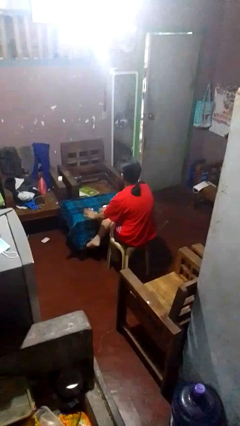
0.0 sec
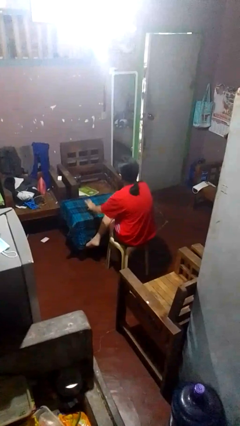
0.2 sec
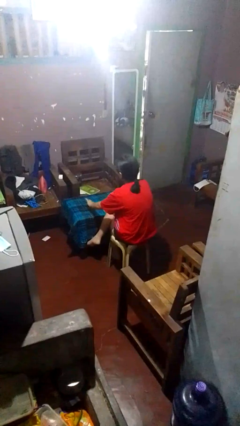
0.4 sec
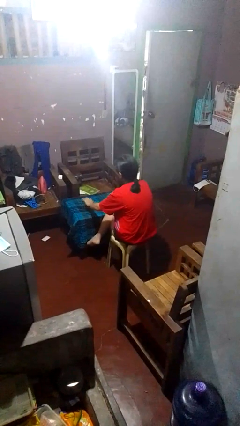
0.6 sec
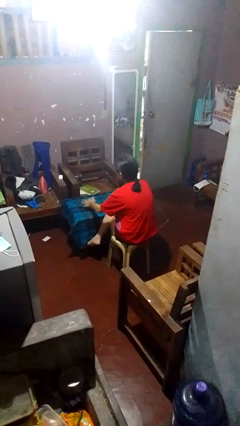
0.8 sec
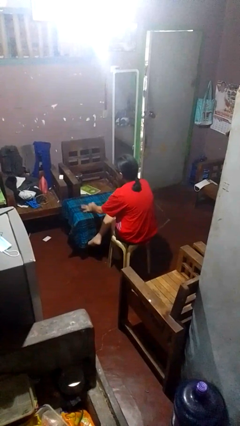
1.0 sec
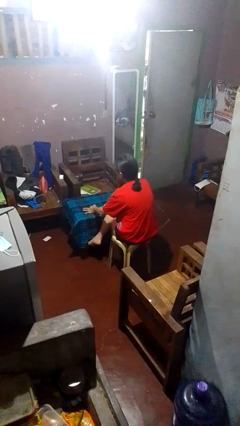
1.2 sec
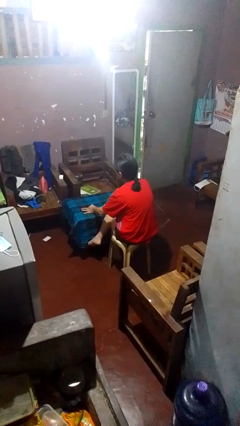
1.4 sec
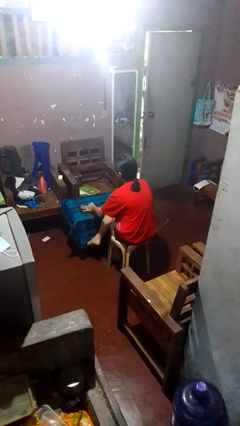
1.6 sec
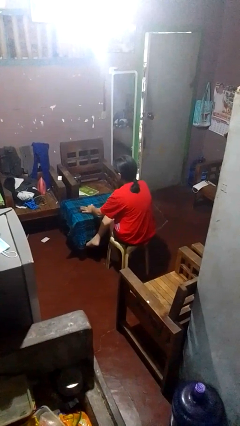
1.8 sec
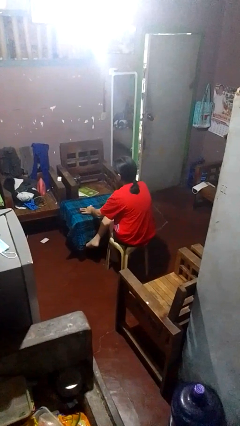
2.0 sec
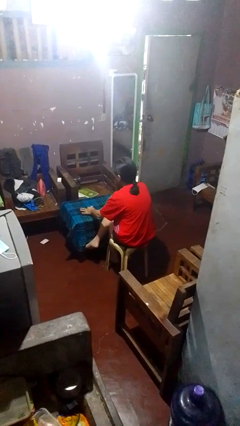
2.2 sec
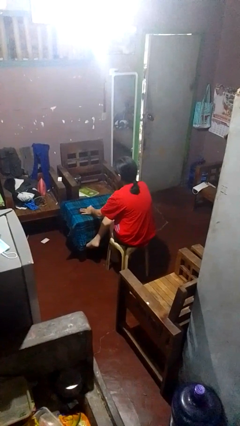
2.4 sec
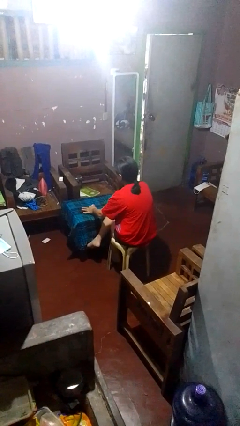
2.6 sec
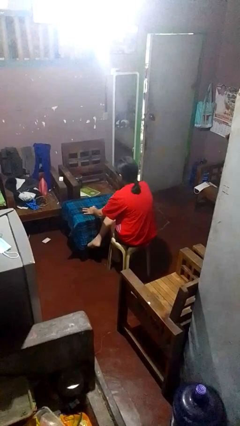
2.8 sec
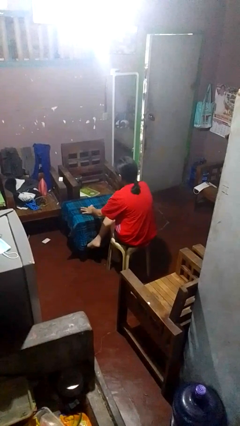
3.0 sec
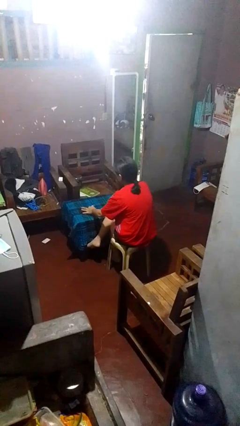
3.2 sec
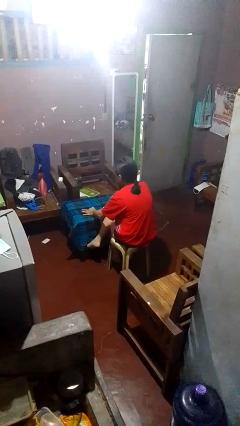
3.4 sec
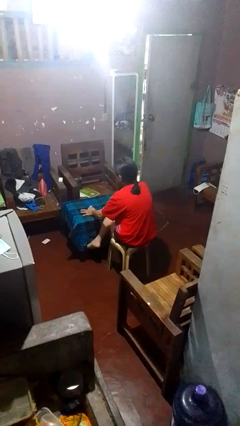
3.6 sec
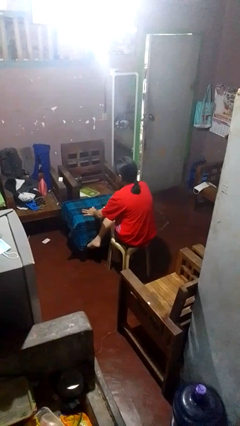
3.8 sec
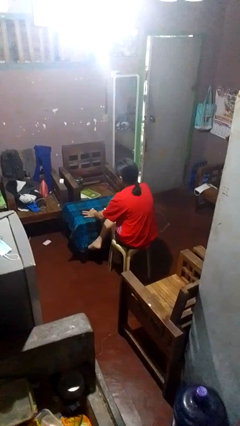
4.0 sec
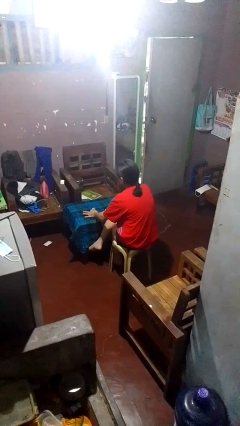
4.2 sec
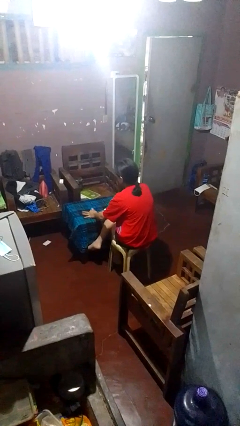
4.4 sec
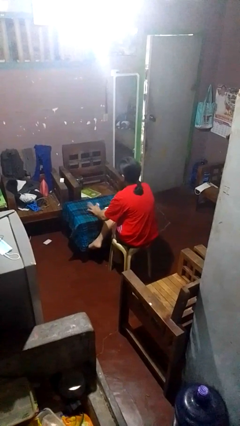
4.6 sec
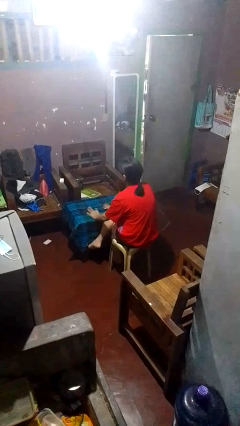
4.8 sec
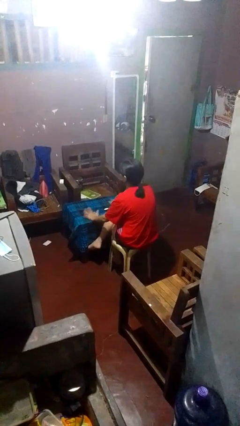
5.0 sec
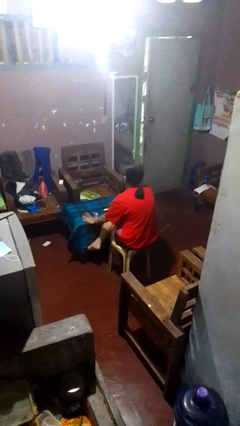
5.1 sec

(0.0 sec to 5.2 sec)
person paints fingernails

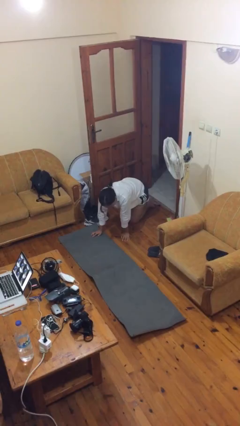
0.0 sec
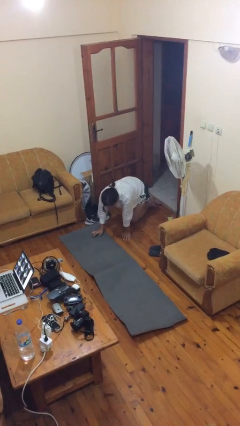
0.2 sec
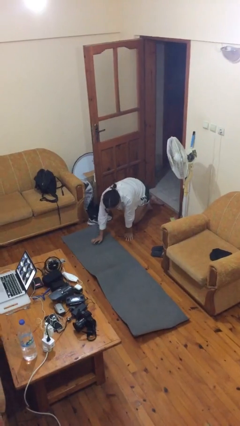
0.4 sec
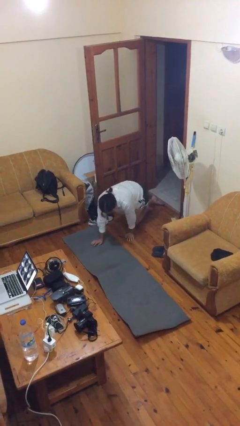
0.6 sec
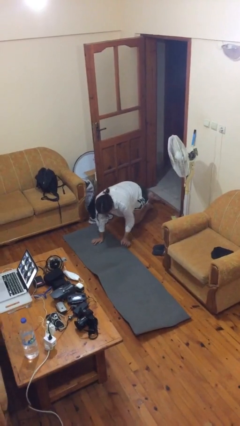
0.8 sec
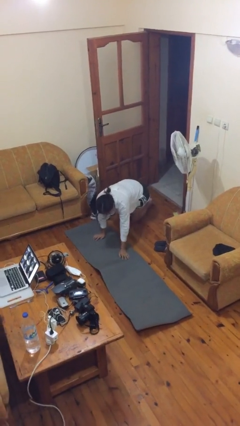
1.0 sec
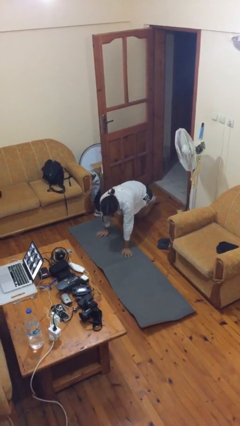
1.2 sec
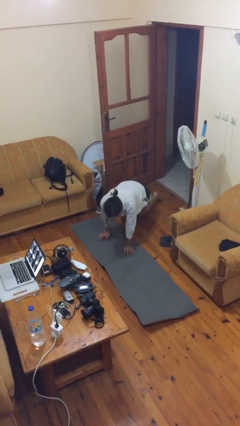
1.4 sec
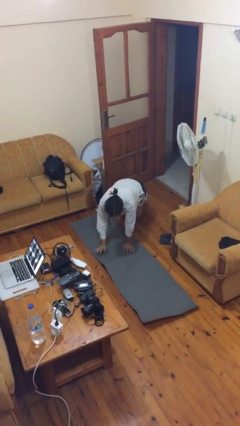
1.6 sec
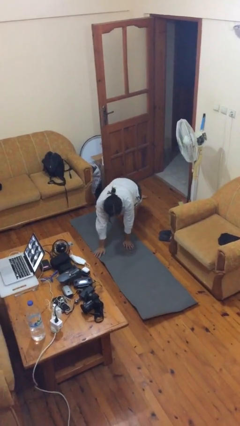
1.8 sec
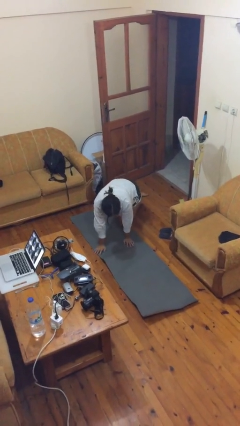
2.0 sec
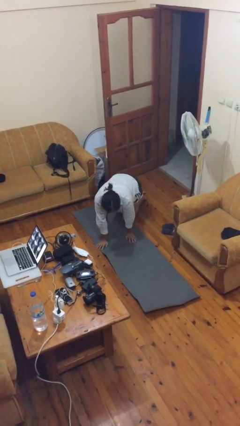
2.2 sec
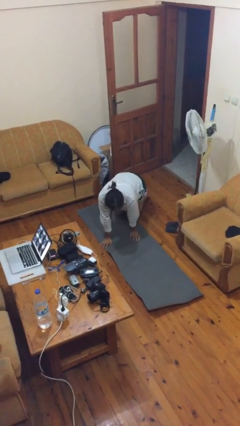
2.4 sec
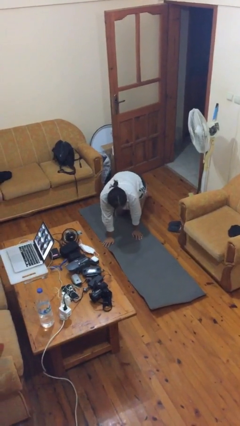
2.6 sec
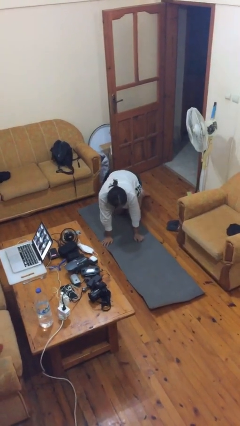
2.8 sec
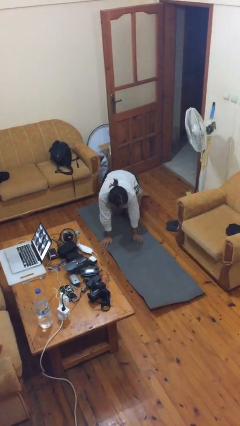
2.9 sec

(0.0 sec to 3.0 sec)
person crawls

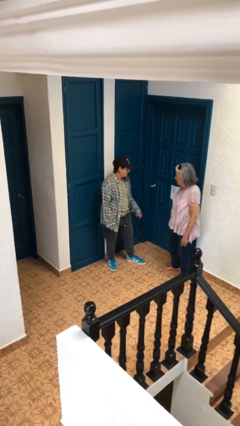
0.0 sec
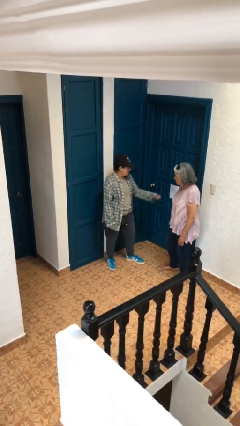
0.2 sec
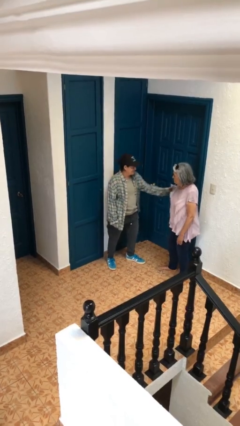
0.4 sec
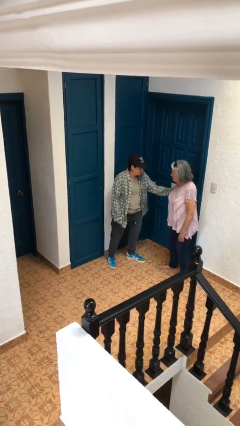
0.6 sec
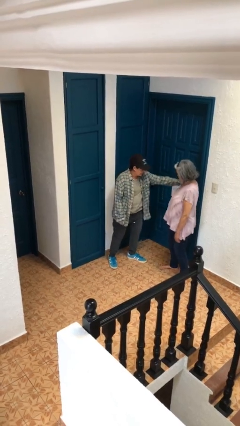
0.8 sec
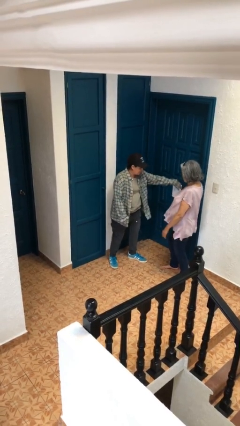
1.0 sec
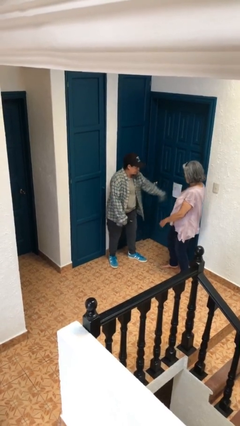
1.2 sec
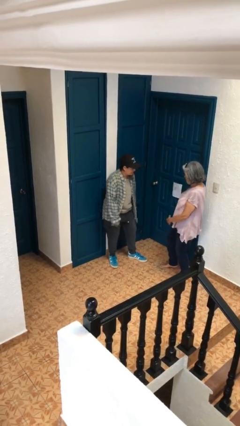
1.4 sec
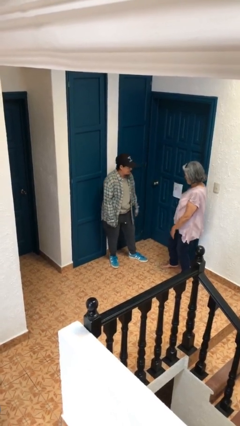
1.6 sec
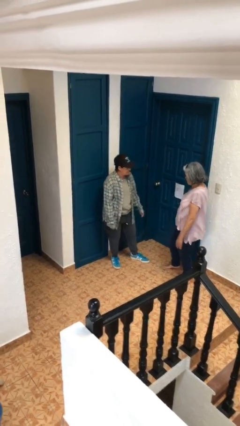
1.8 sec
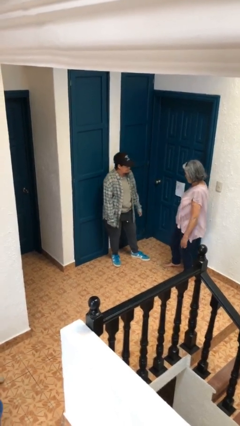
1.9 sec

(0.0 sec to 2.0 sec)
person shoves person

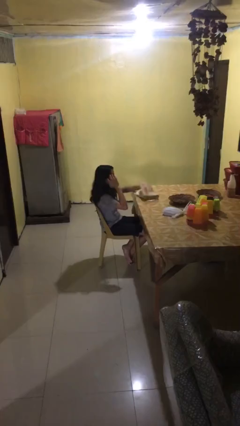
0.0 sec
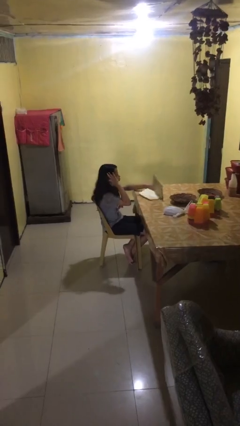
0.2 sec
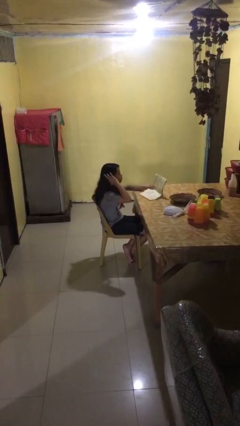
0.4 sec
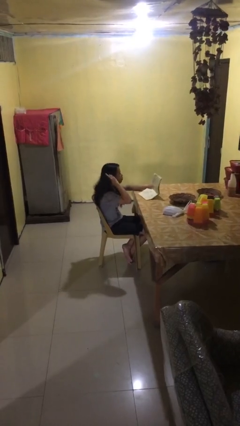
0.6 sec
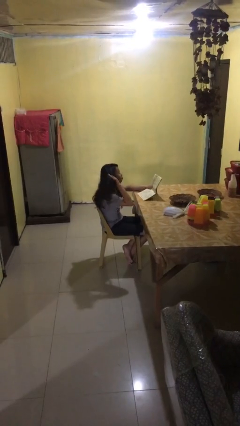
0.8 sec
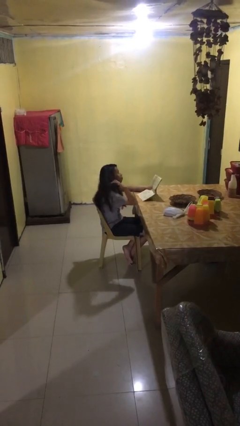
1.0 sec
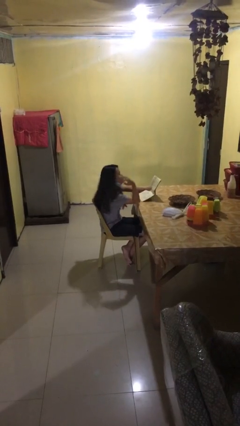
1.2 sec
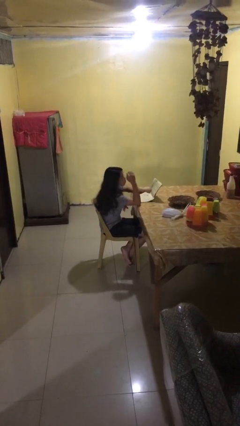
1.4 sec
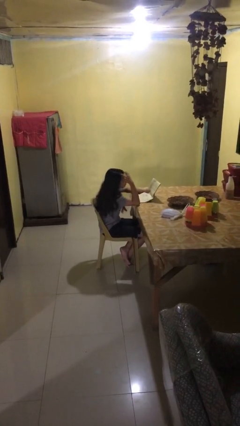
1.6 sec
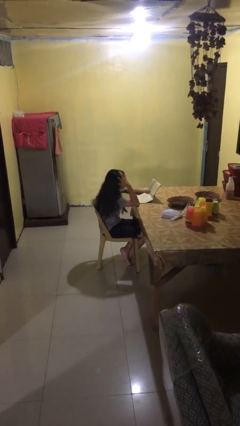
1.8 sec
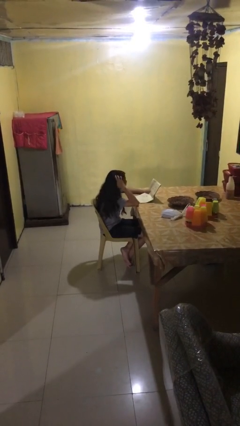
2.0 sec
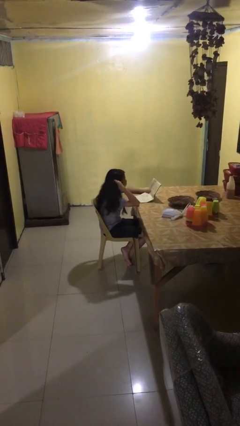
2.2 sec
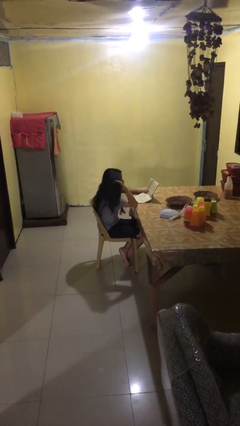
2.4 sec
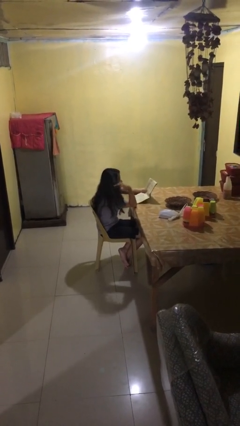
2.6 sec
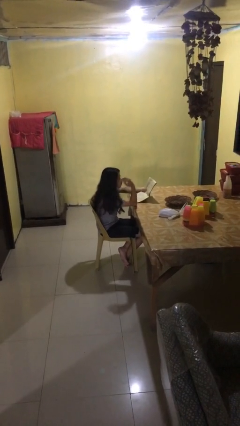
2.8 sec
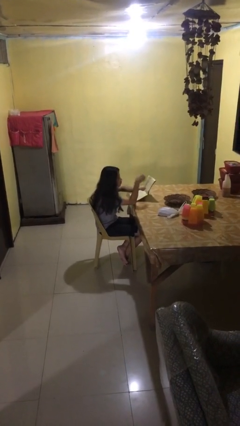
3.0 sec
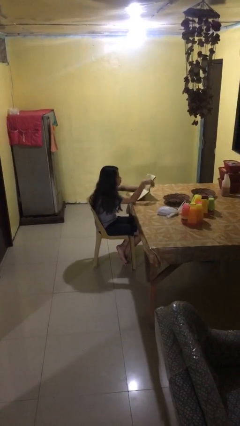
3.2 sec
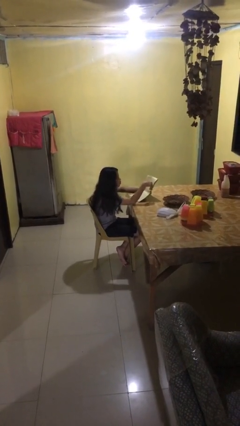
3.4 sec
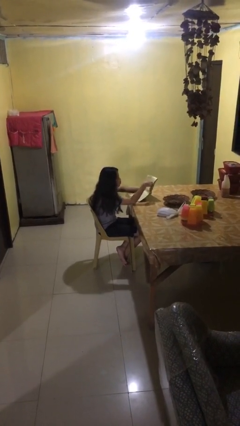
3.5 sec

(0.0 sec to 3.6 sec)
person reads document

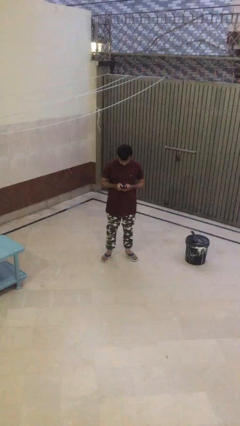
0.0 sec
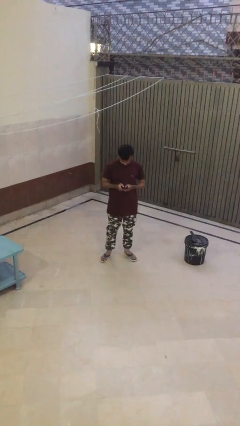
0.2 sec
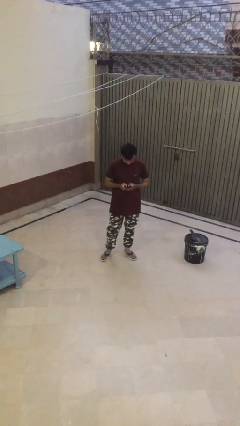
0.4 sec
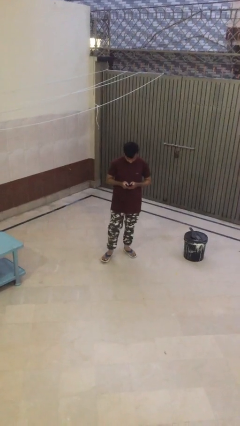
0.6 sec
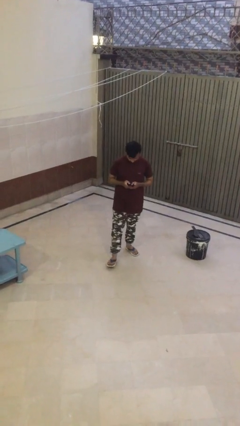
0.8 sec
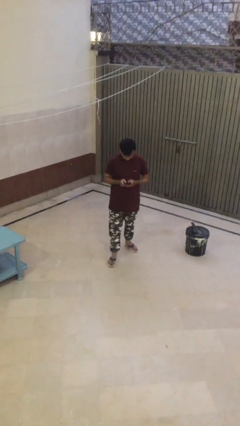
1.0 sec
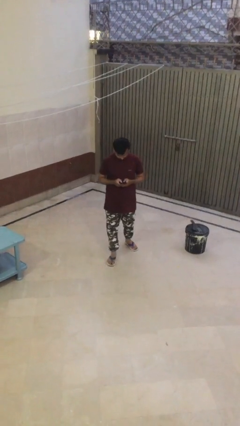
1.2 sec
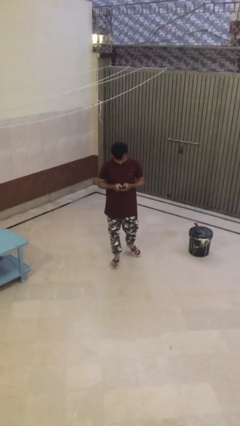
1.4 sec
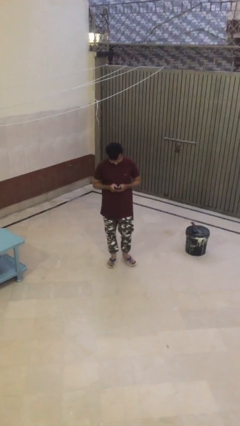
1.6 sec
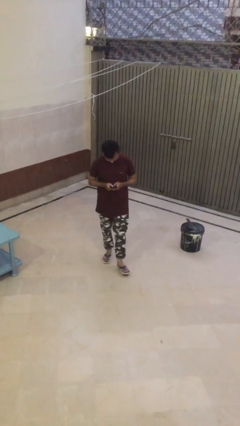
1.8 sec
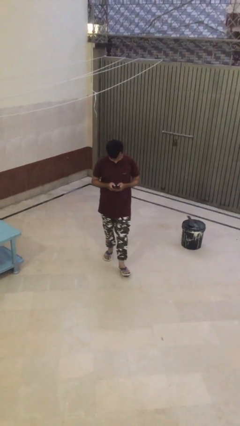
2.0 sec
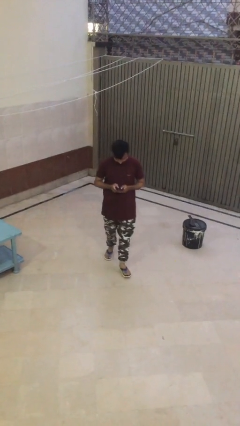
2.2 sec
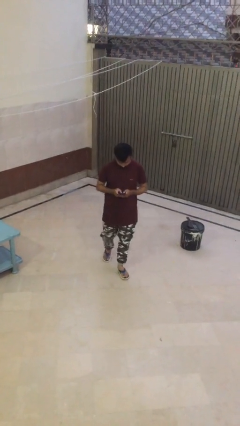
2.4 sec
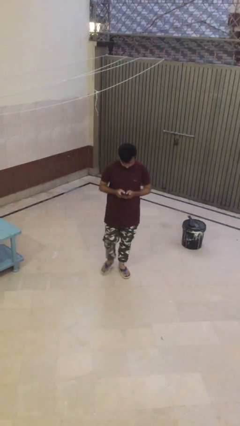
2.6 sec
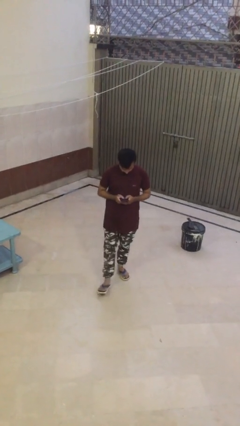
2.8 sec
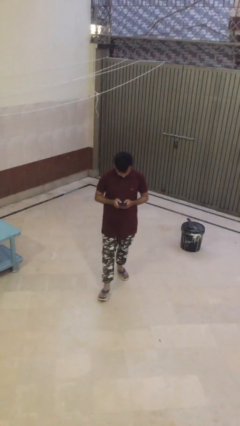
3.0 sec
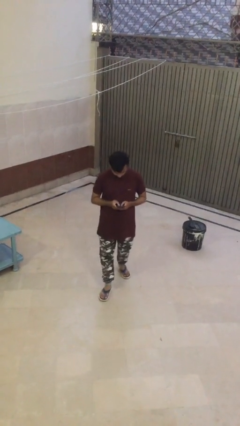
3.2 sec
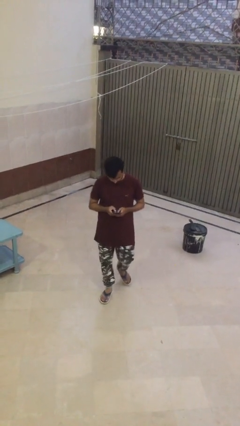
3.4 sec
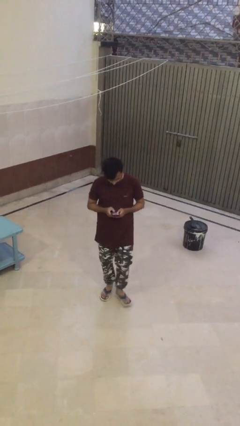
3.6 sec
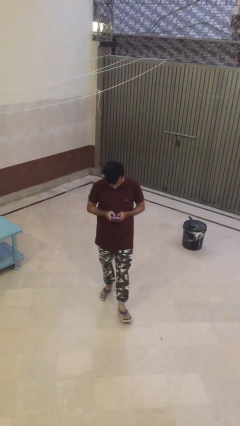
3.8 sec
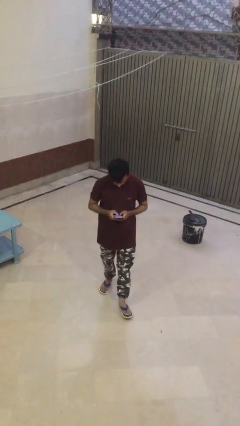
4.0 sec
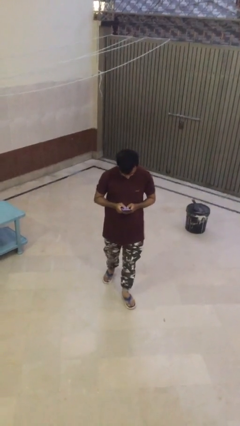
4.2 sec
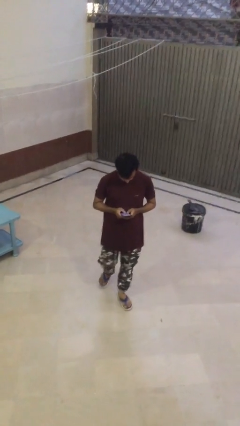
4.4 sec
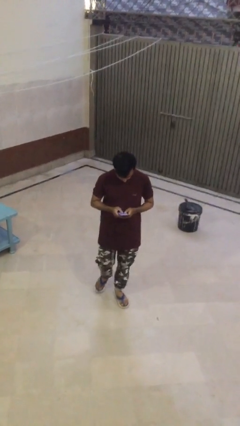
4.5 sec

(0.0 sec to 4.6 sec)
person texts on phone
